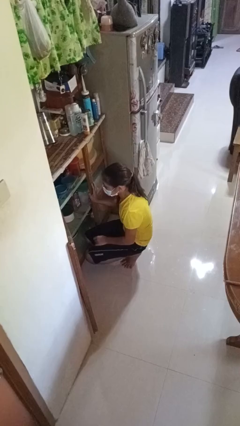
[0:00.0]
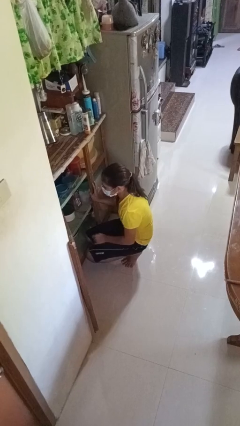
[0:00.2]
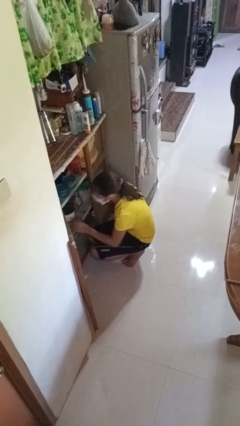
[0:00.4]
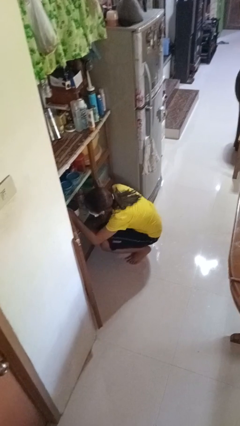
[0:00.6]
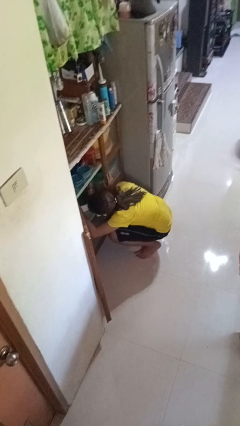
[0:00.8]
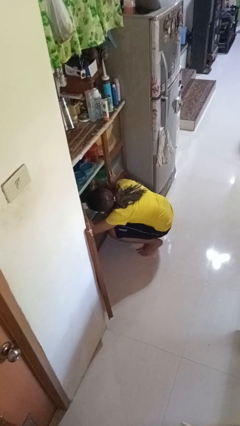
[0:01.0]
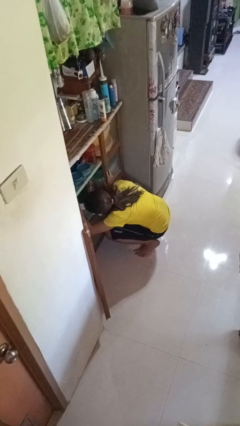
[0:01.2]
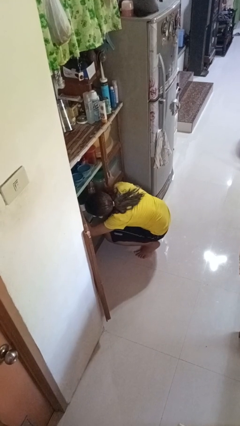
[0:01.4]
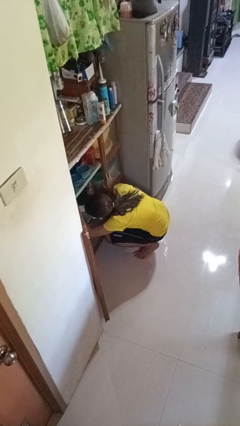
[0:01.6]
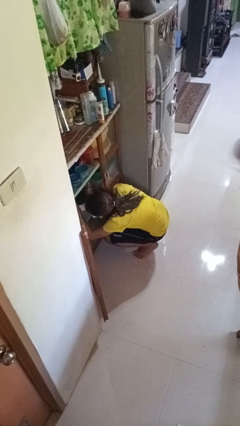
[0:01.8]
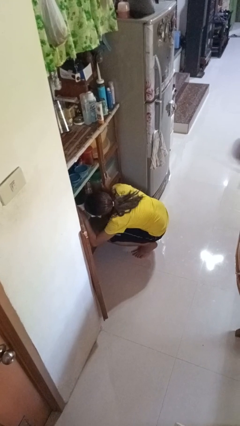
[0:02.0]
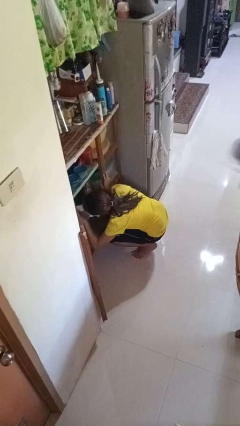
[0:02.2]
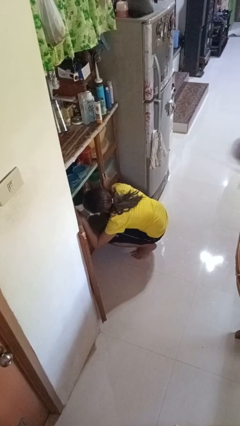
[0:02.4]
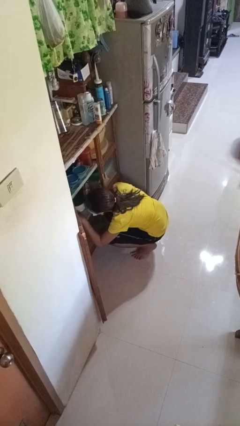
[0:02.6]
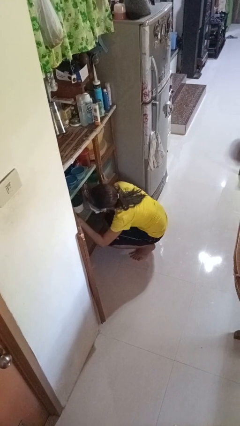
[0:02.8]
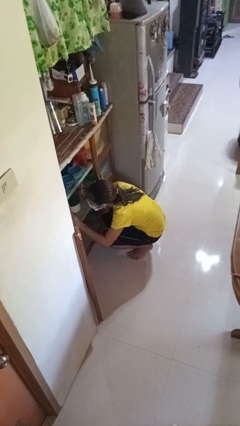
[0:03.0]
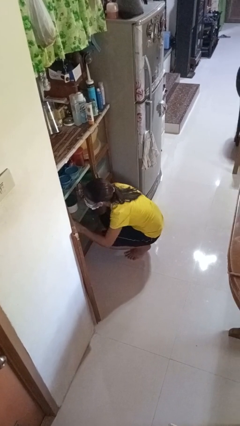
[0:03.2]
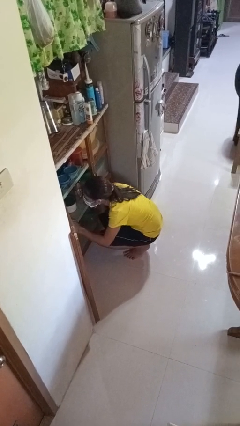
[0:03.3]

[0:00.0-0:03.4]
person searches in cabinet

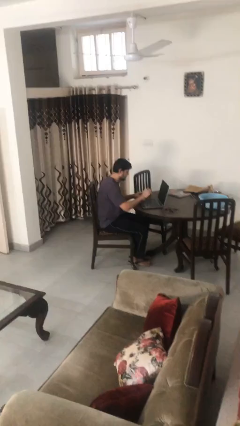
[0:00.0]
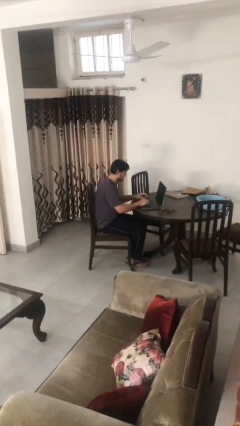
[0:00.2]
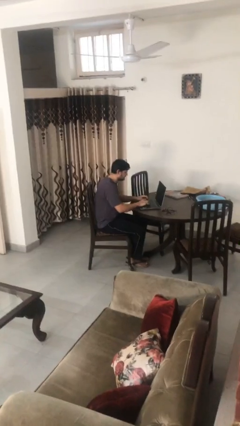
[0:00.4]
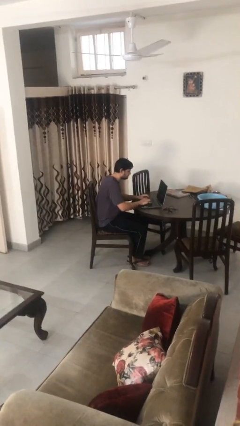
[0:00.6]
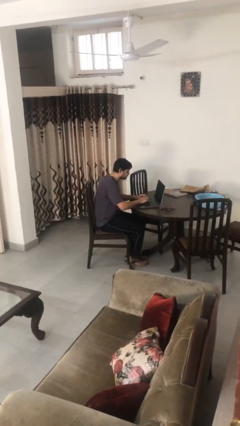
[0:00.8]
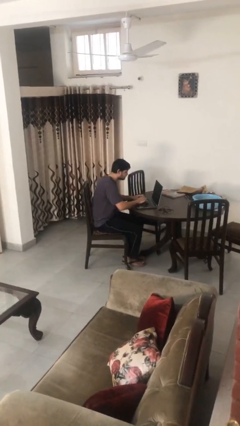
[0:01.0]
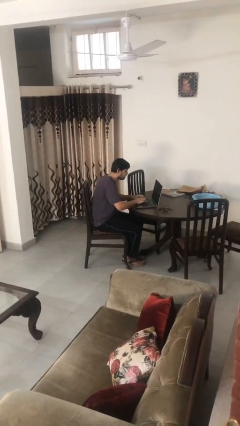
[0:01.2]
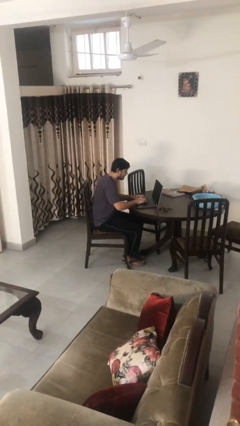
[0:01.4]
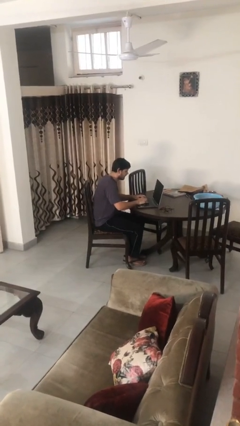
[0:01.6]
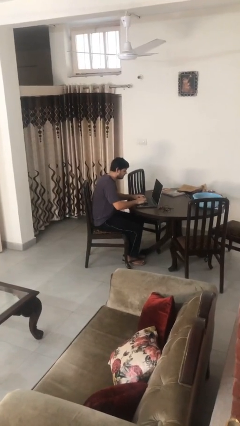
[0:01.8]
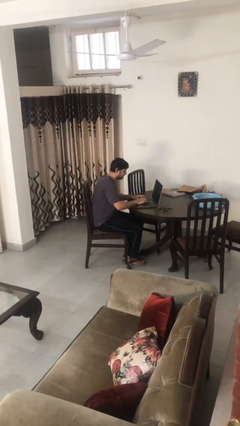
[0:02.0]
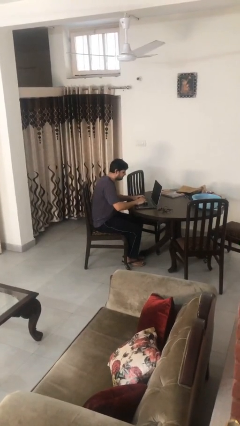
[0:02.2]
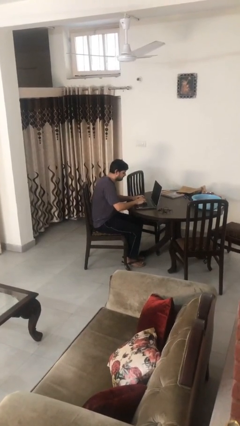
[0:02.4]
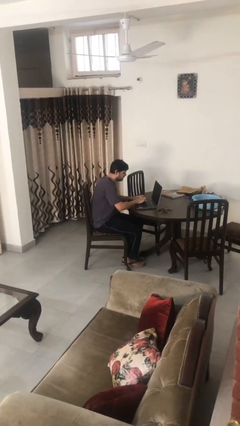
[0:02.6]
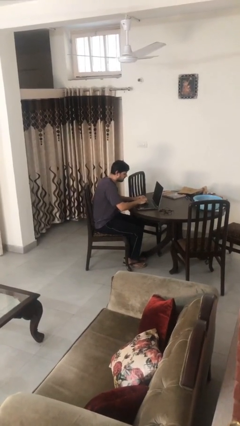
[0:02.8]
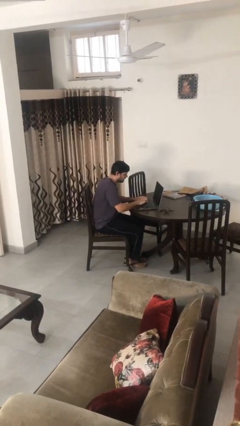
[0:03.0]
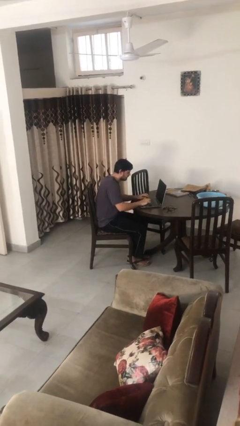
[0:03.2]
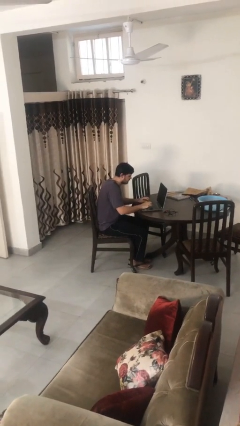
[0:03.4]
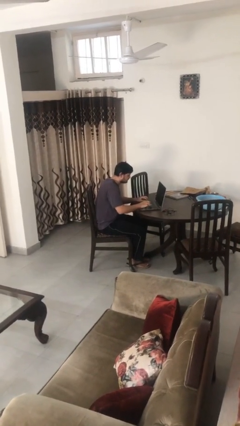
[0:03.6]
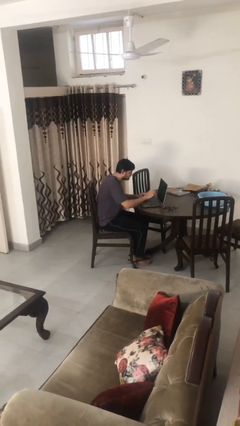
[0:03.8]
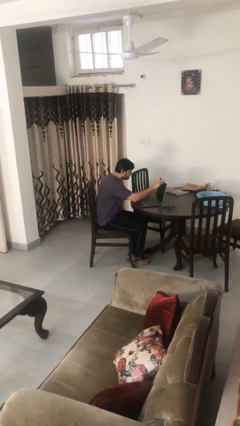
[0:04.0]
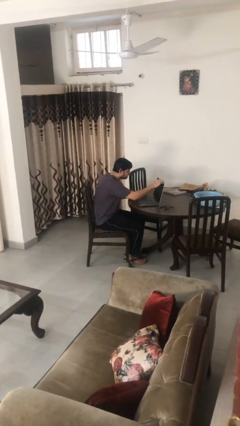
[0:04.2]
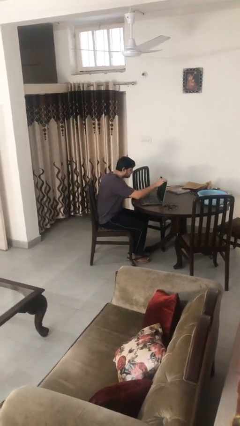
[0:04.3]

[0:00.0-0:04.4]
person interacts with laptop

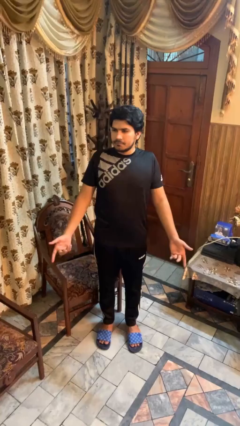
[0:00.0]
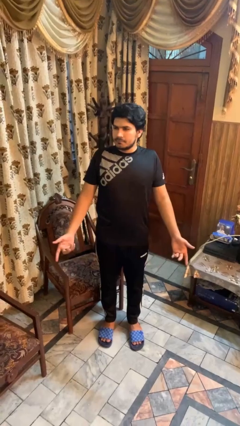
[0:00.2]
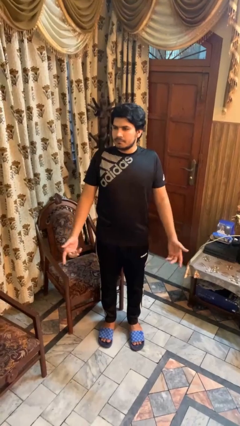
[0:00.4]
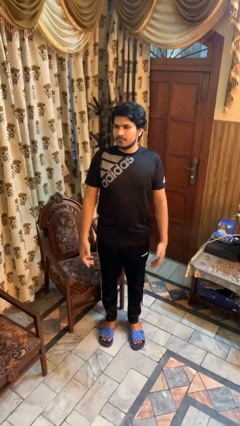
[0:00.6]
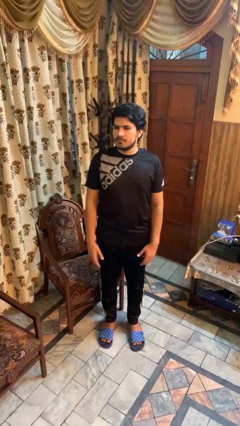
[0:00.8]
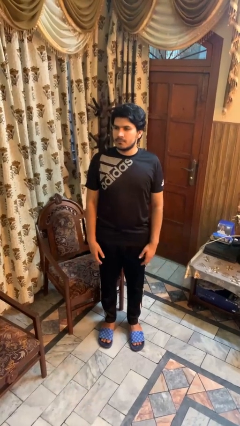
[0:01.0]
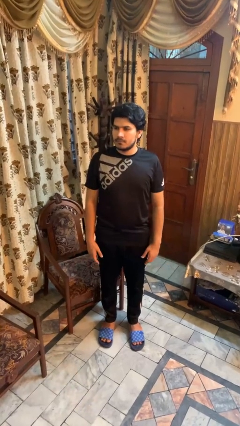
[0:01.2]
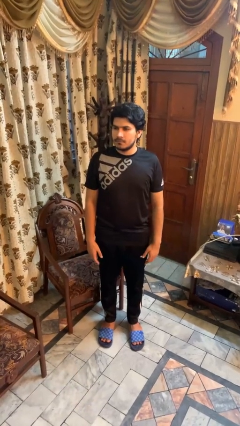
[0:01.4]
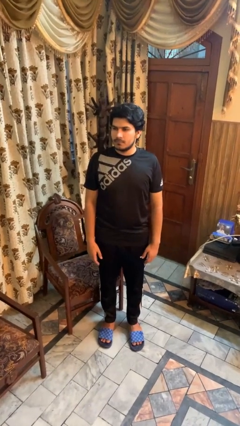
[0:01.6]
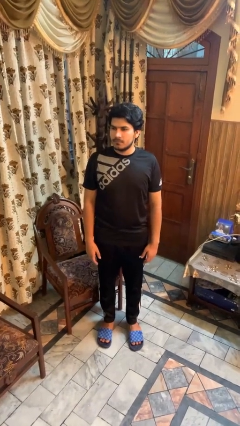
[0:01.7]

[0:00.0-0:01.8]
person shrugs

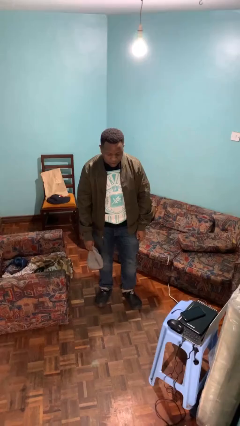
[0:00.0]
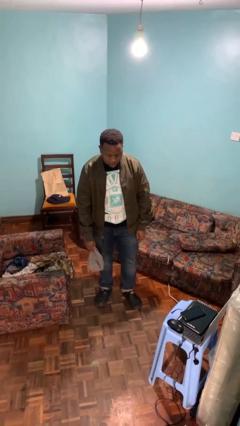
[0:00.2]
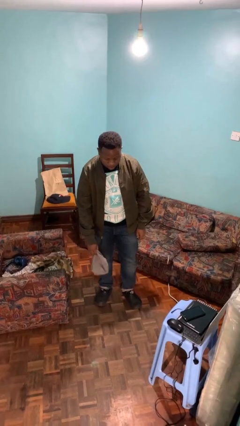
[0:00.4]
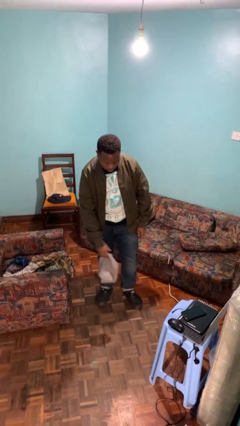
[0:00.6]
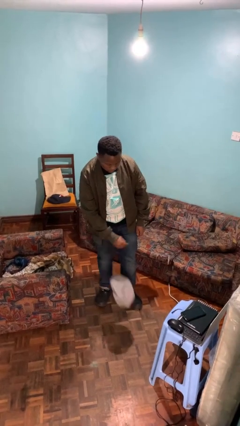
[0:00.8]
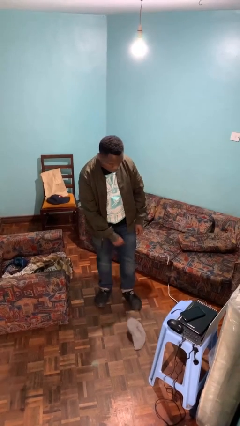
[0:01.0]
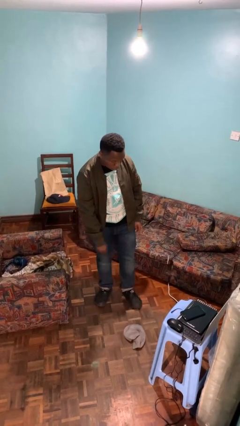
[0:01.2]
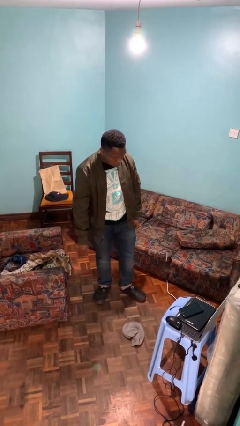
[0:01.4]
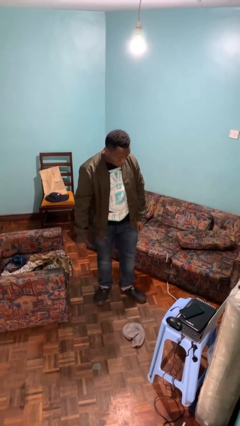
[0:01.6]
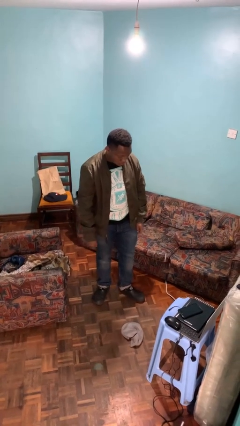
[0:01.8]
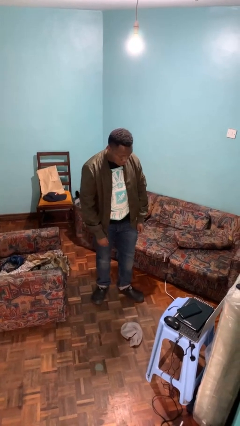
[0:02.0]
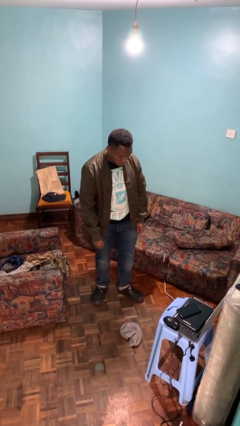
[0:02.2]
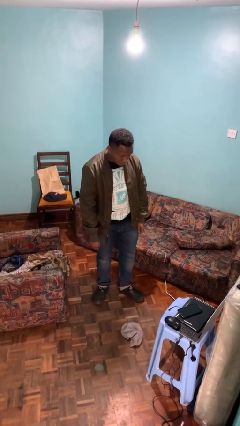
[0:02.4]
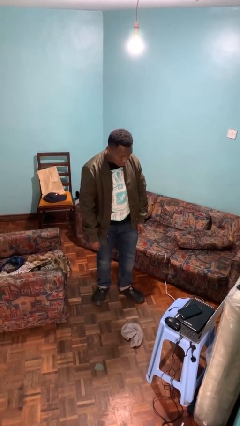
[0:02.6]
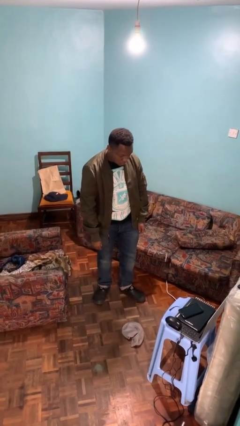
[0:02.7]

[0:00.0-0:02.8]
person drops object

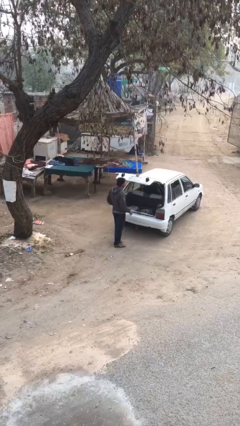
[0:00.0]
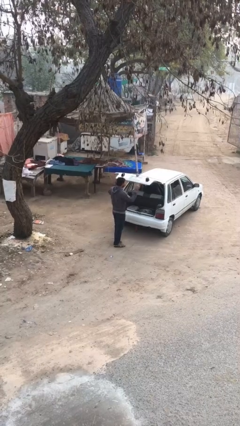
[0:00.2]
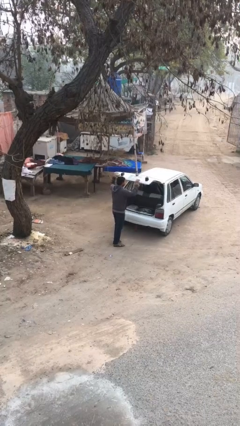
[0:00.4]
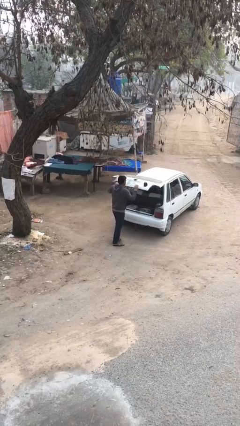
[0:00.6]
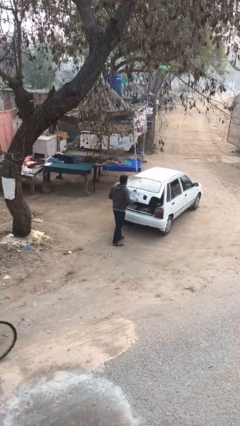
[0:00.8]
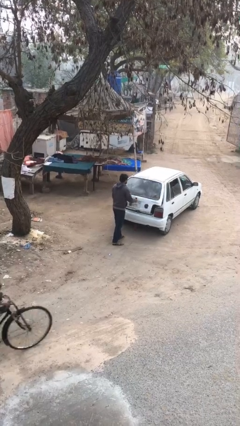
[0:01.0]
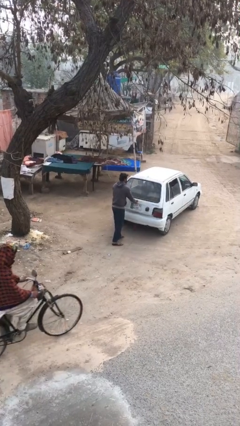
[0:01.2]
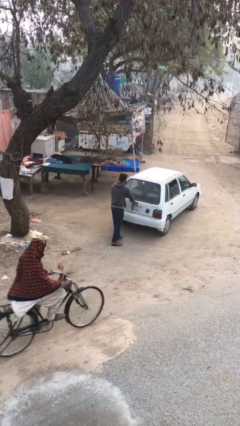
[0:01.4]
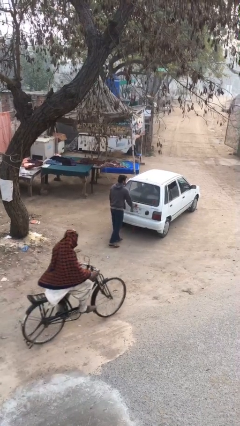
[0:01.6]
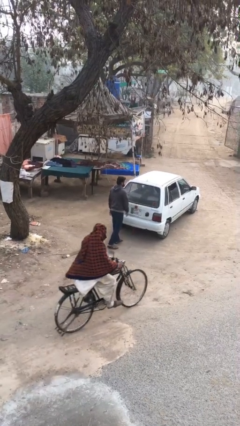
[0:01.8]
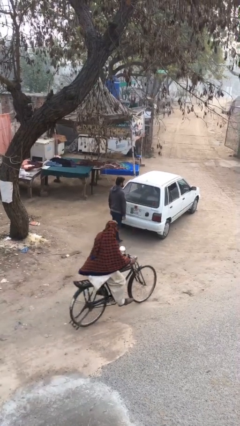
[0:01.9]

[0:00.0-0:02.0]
person closes car trunk

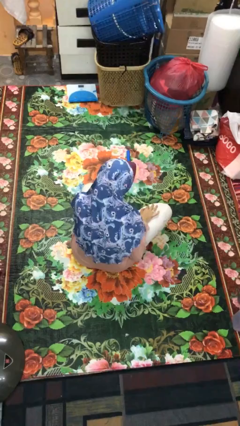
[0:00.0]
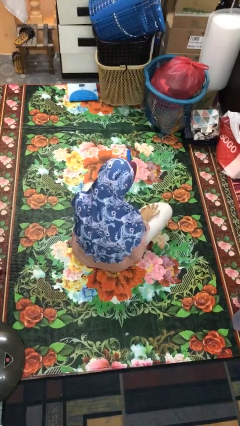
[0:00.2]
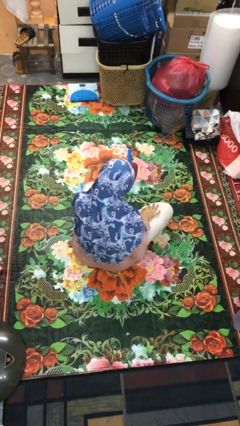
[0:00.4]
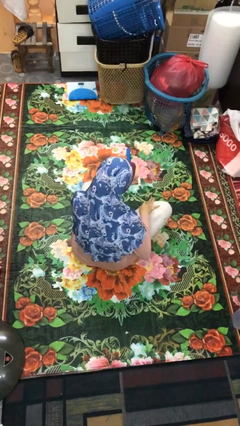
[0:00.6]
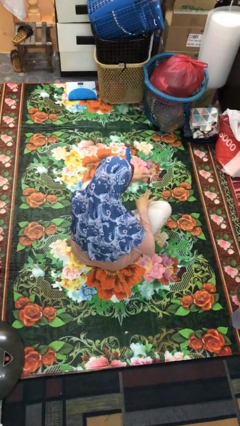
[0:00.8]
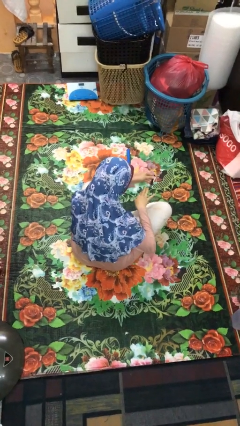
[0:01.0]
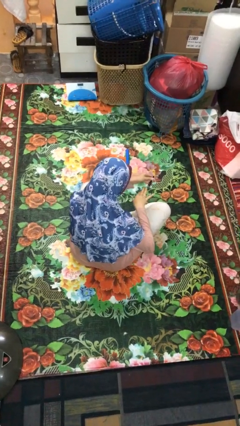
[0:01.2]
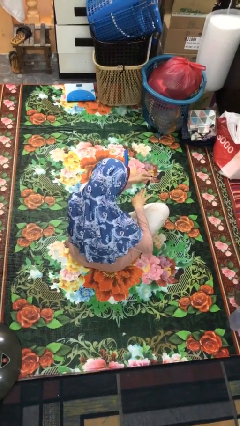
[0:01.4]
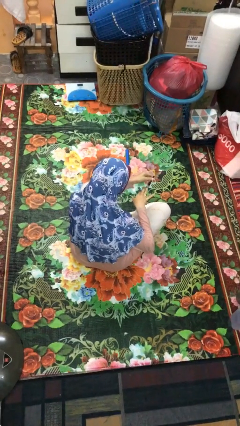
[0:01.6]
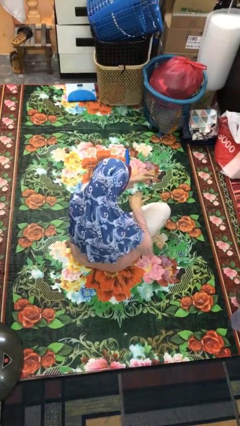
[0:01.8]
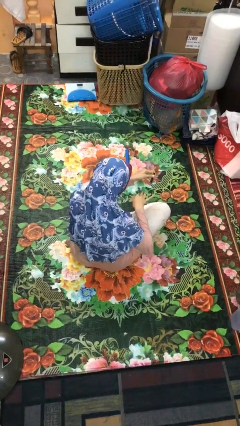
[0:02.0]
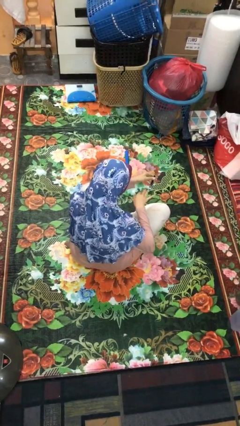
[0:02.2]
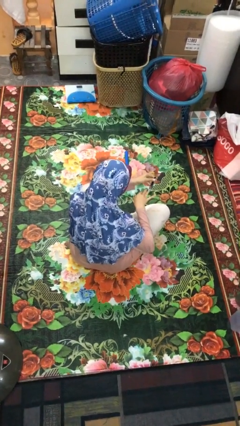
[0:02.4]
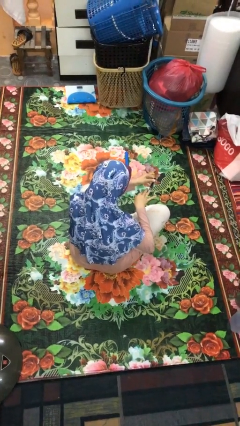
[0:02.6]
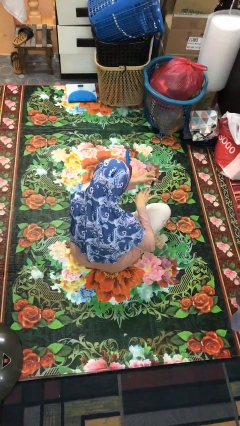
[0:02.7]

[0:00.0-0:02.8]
person clips fingernails

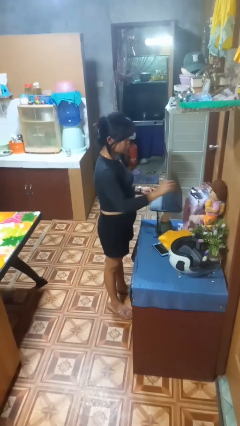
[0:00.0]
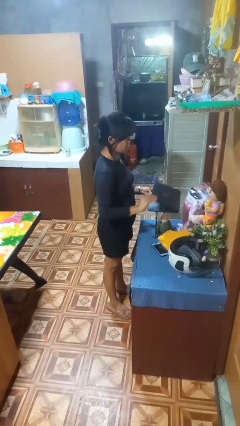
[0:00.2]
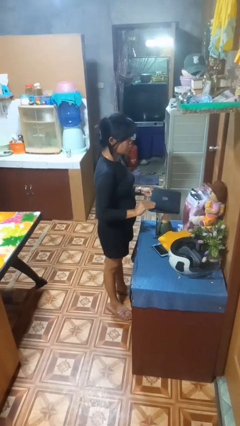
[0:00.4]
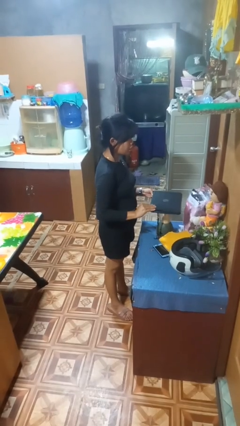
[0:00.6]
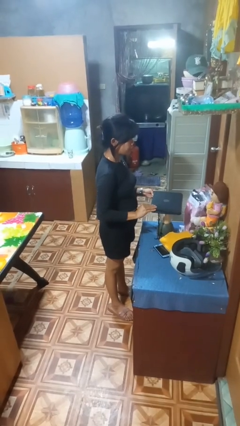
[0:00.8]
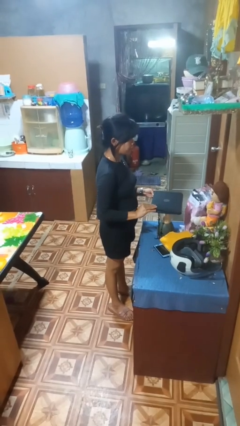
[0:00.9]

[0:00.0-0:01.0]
person closes laptop
